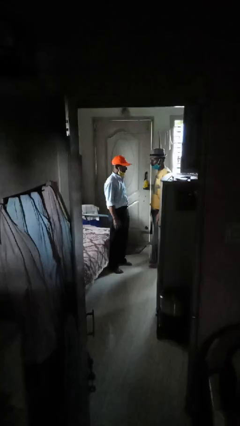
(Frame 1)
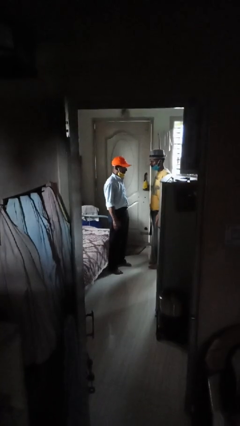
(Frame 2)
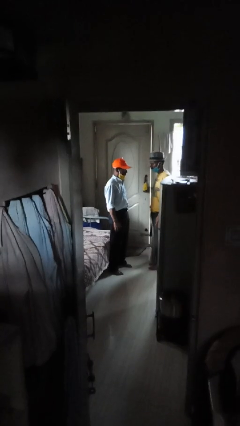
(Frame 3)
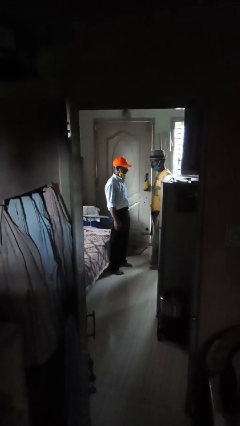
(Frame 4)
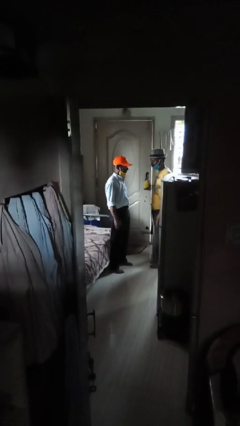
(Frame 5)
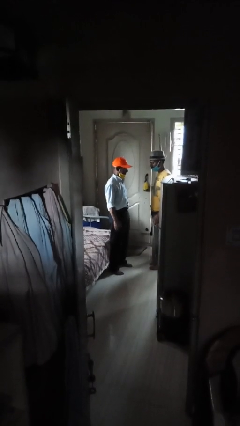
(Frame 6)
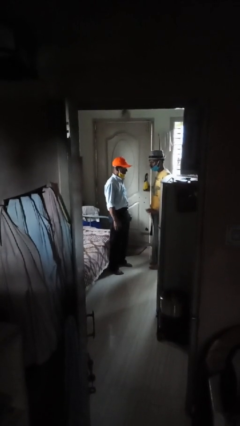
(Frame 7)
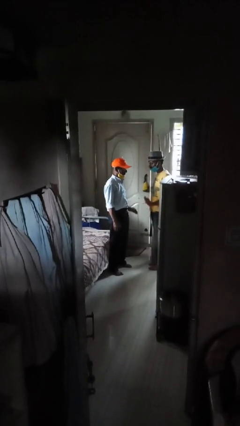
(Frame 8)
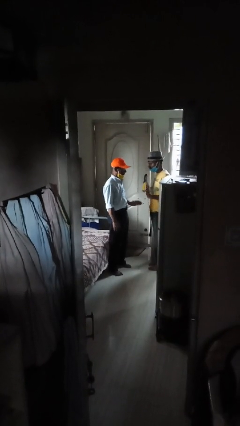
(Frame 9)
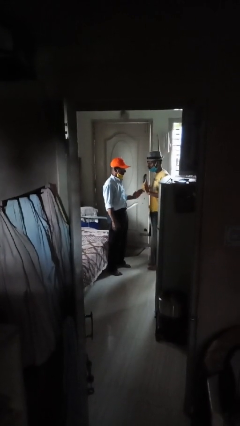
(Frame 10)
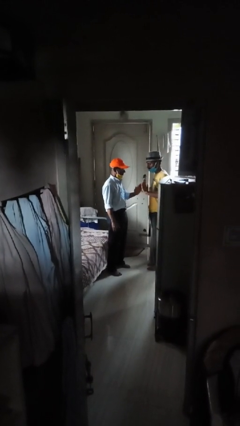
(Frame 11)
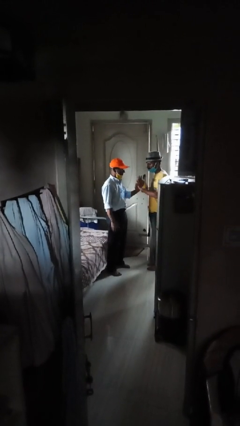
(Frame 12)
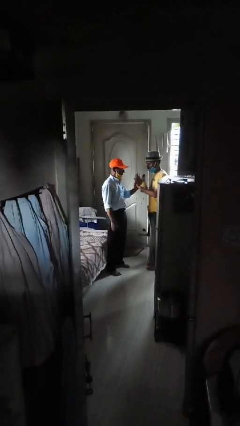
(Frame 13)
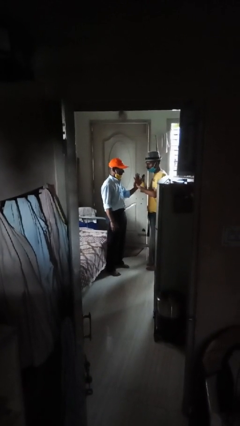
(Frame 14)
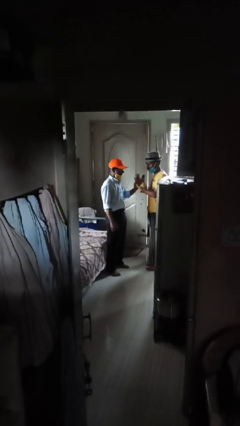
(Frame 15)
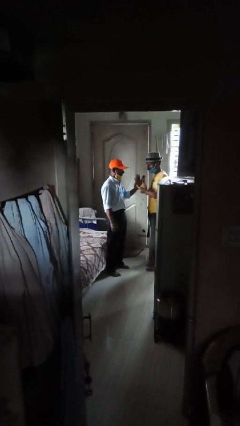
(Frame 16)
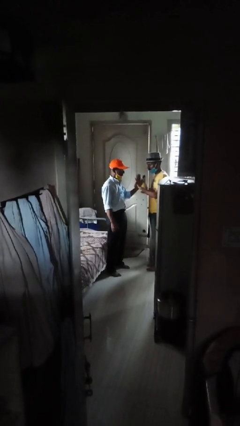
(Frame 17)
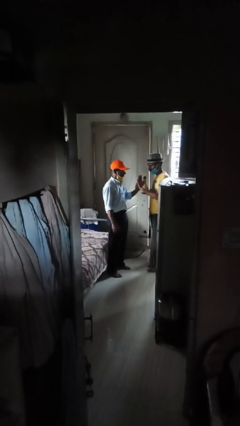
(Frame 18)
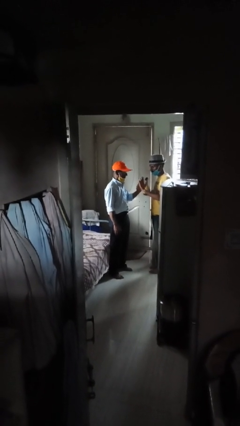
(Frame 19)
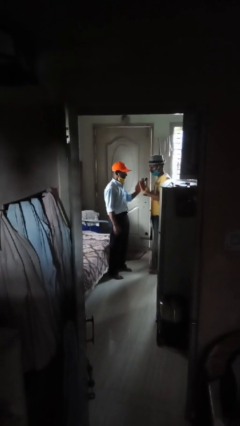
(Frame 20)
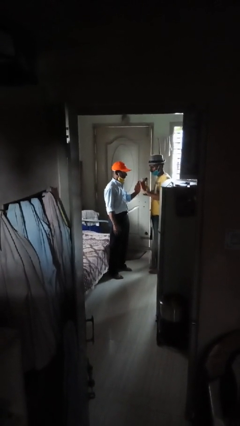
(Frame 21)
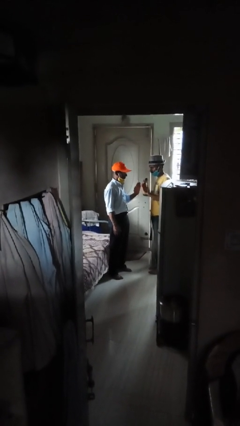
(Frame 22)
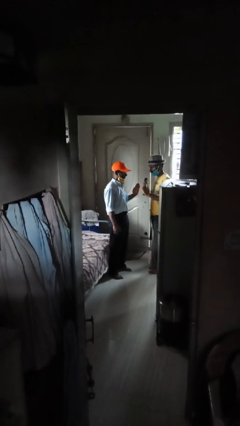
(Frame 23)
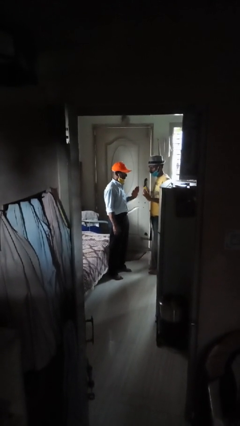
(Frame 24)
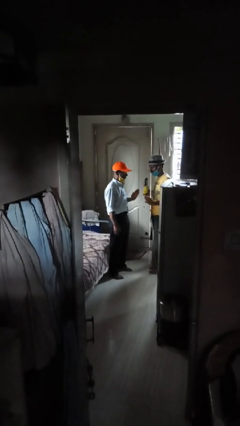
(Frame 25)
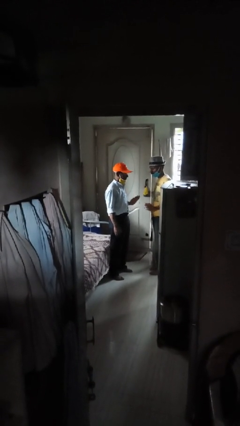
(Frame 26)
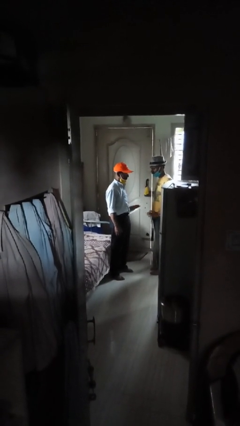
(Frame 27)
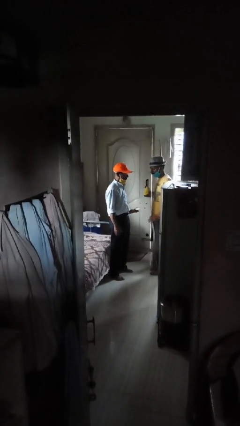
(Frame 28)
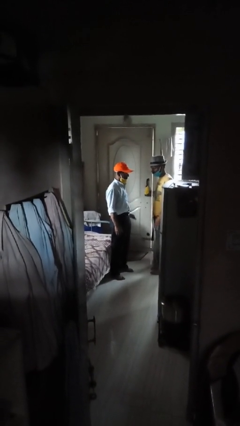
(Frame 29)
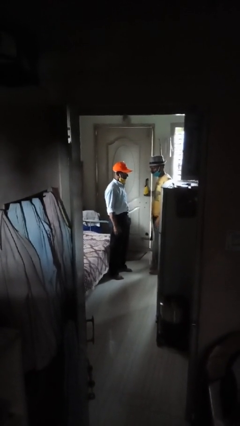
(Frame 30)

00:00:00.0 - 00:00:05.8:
person highfives hand

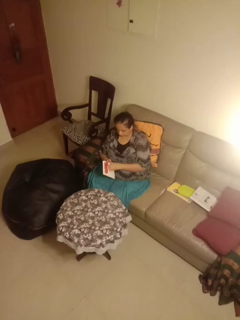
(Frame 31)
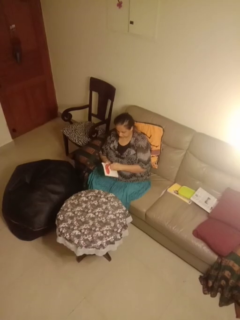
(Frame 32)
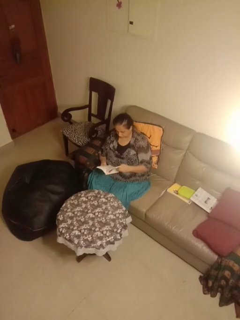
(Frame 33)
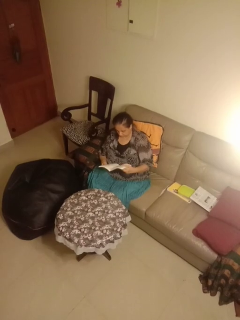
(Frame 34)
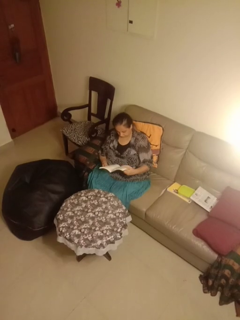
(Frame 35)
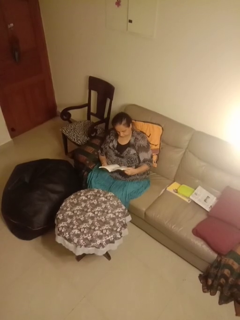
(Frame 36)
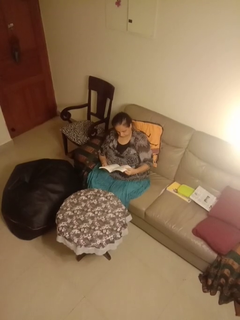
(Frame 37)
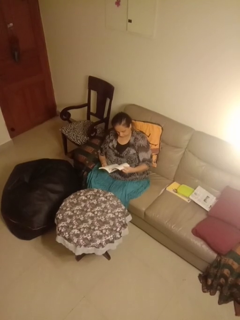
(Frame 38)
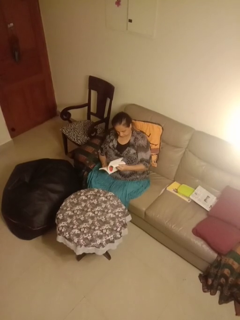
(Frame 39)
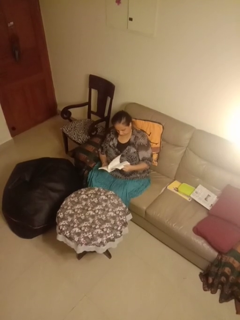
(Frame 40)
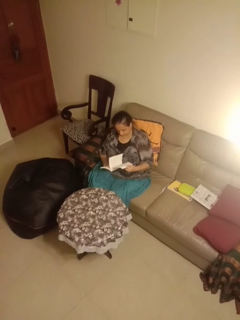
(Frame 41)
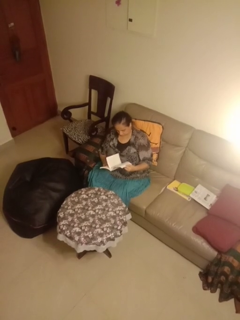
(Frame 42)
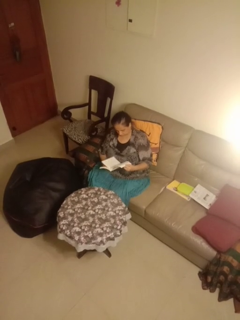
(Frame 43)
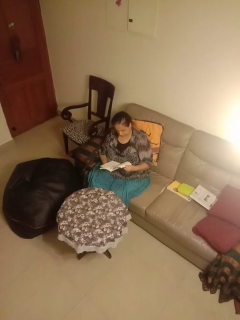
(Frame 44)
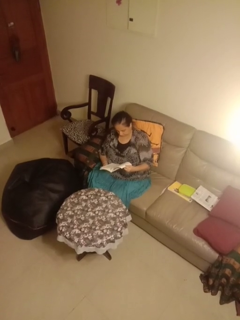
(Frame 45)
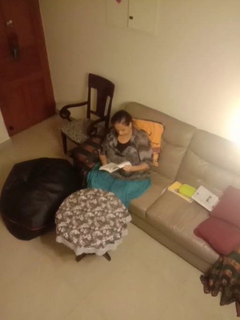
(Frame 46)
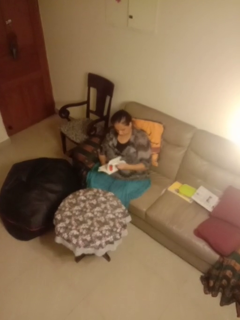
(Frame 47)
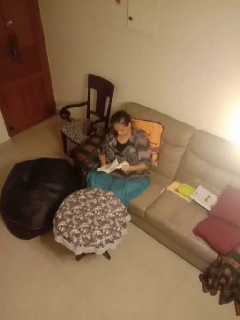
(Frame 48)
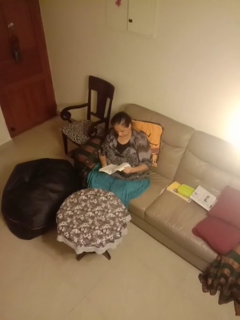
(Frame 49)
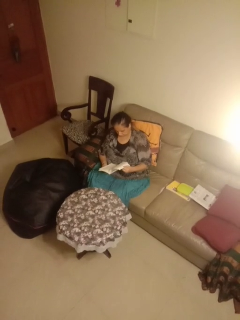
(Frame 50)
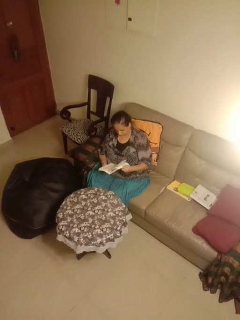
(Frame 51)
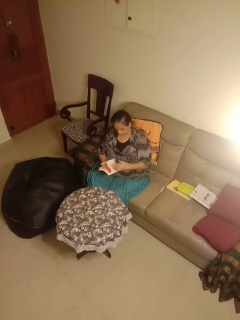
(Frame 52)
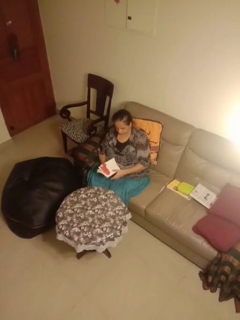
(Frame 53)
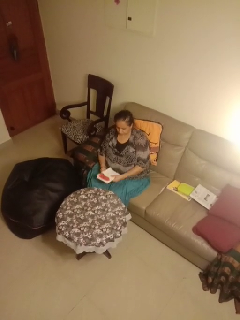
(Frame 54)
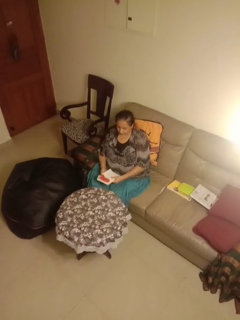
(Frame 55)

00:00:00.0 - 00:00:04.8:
person reads book

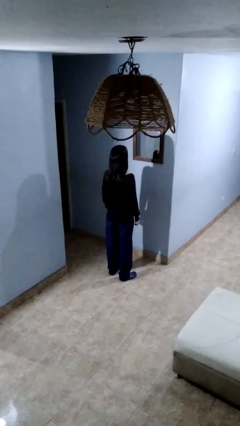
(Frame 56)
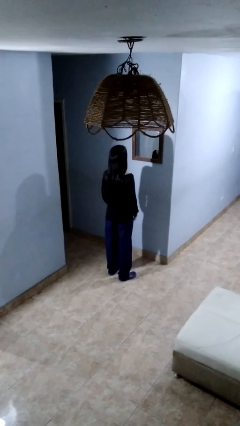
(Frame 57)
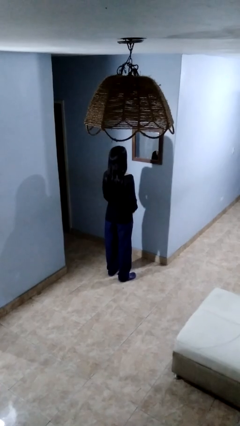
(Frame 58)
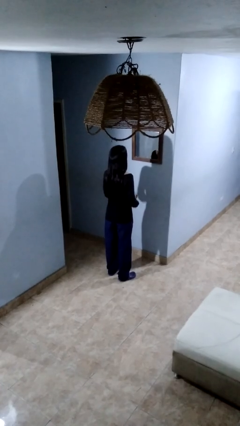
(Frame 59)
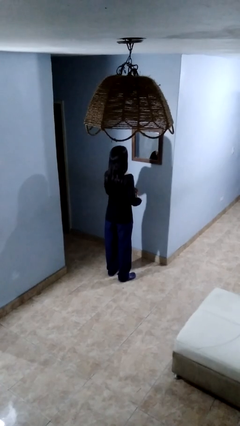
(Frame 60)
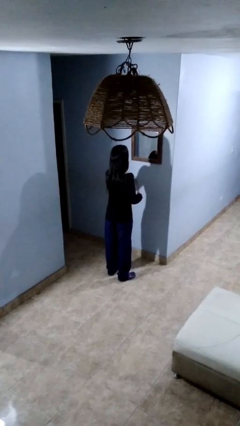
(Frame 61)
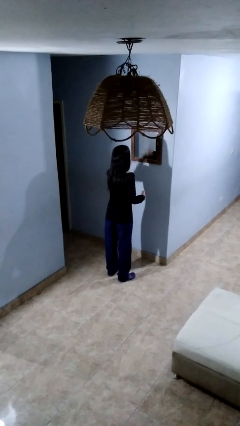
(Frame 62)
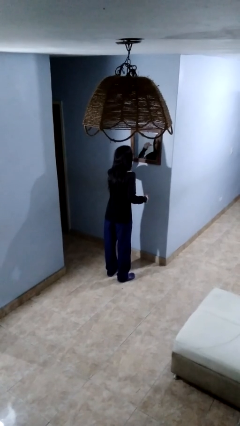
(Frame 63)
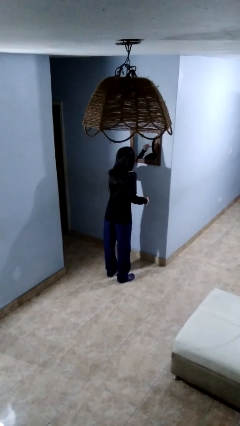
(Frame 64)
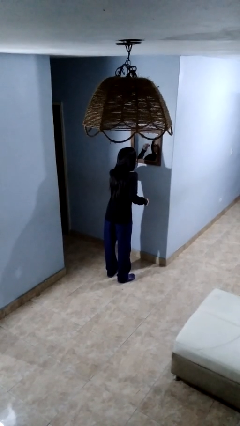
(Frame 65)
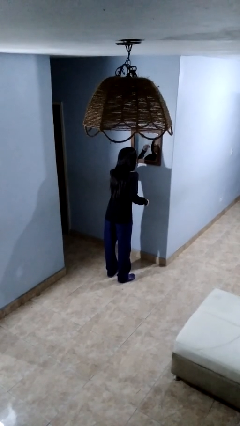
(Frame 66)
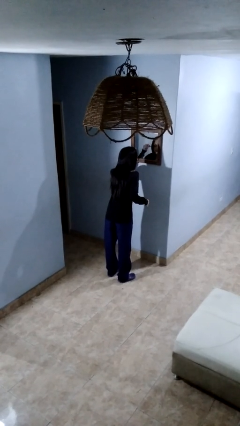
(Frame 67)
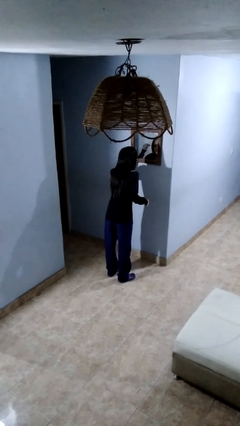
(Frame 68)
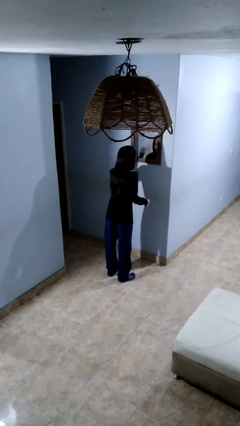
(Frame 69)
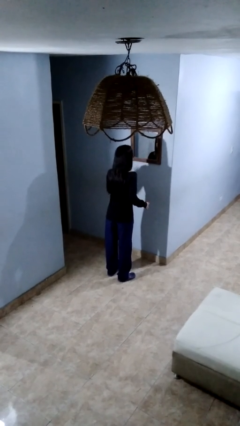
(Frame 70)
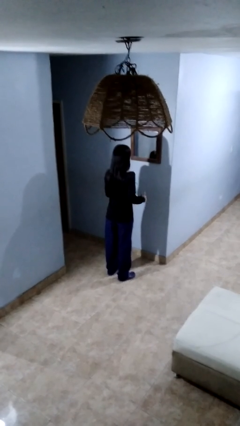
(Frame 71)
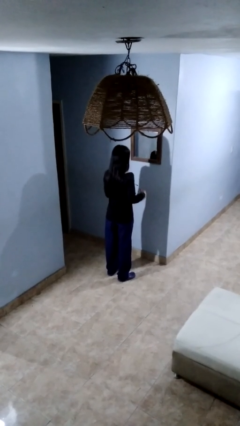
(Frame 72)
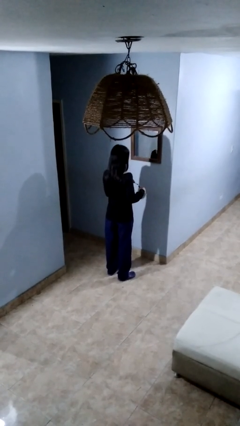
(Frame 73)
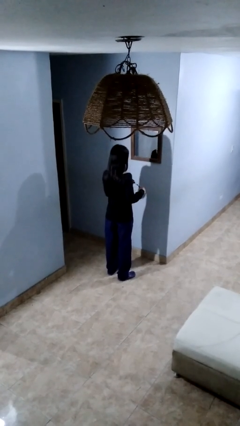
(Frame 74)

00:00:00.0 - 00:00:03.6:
person applies eye makeup

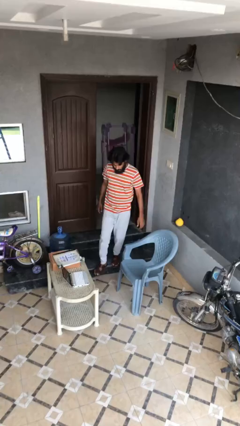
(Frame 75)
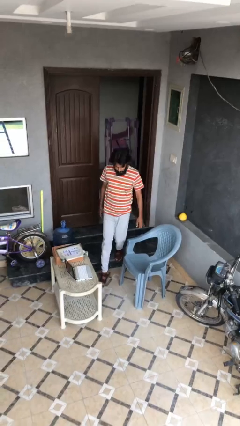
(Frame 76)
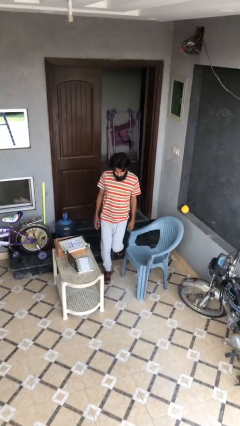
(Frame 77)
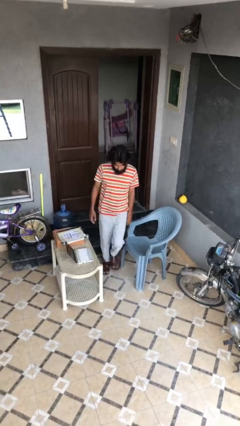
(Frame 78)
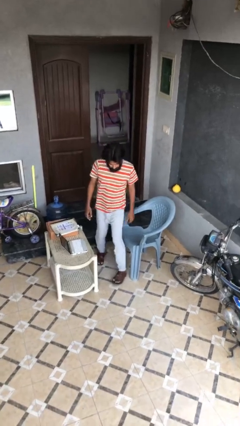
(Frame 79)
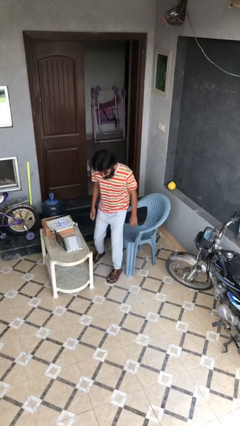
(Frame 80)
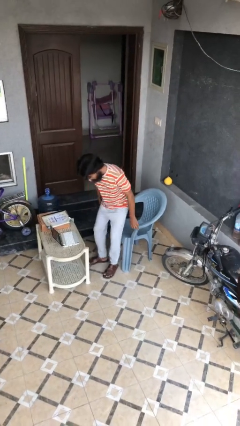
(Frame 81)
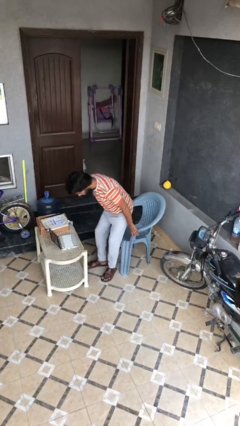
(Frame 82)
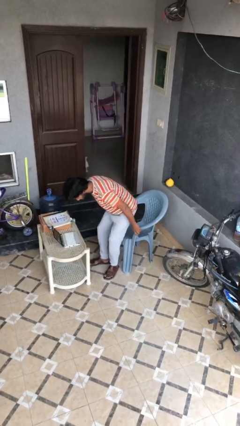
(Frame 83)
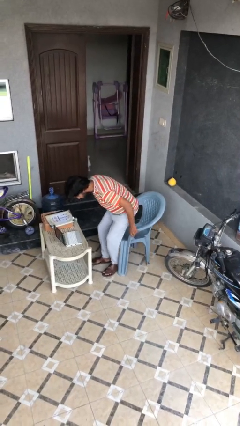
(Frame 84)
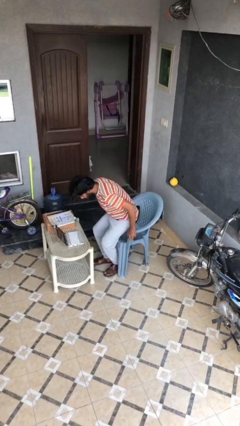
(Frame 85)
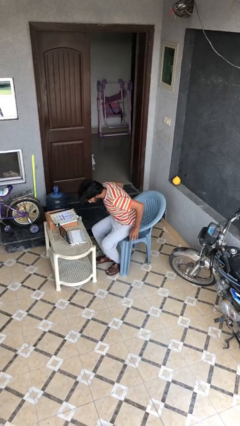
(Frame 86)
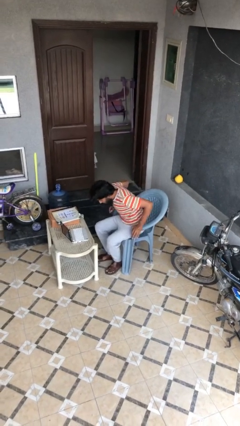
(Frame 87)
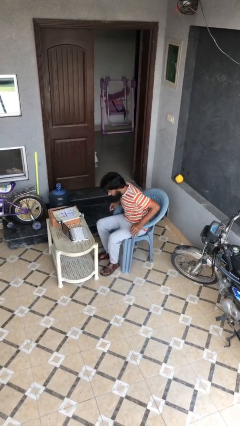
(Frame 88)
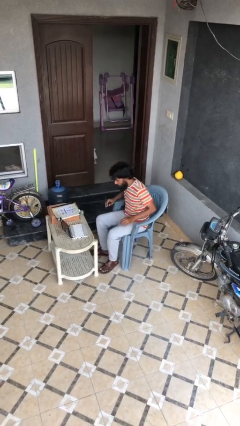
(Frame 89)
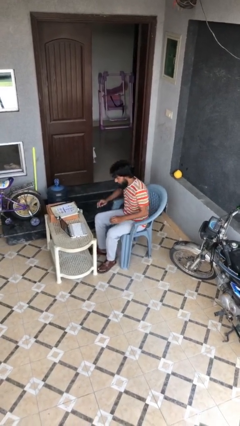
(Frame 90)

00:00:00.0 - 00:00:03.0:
person sits down

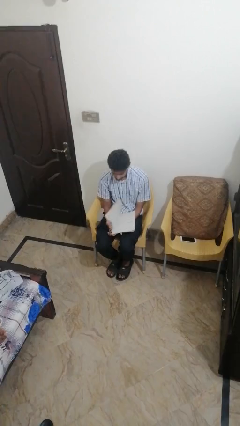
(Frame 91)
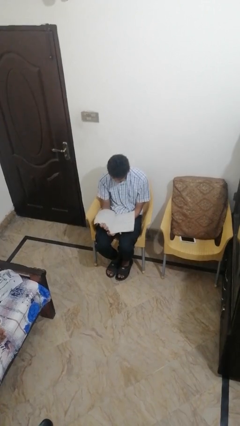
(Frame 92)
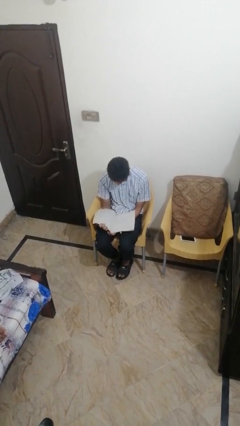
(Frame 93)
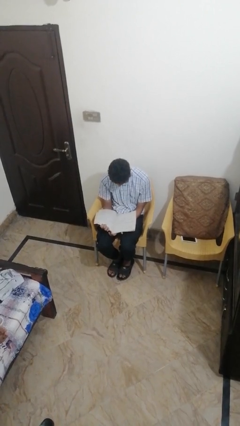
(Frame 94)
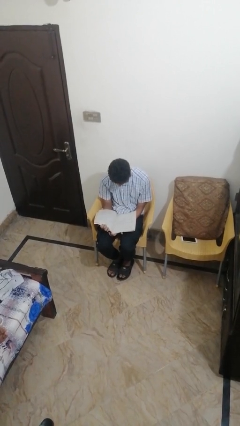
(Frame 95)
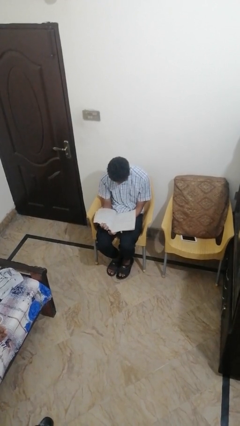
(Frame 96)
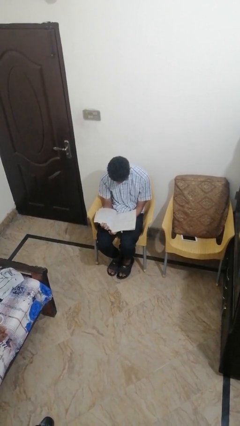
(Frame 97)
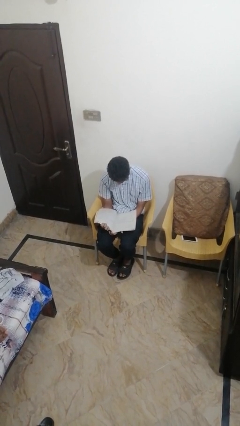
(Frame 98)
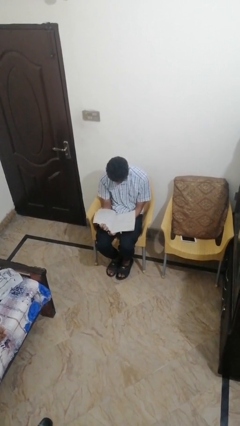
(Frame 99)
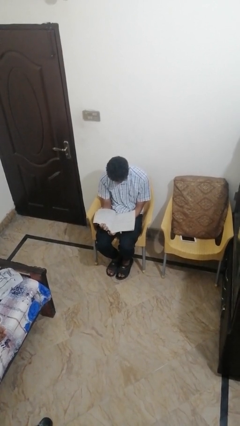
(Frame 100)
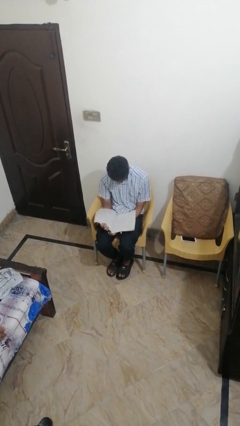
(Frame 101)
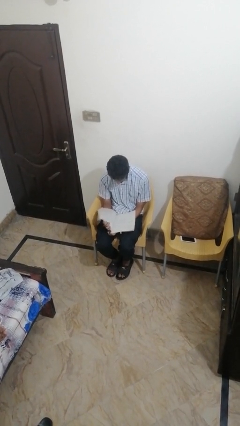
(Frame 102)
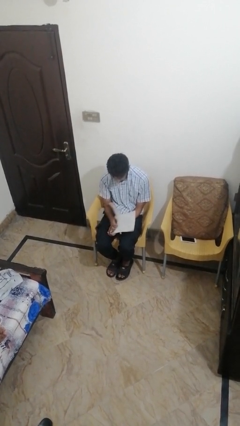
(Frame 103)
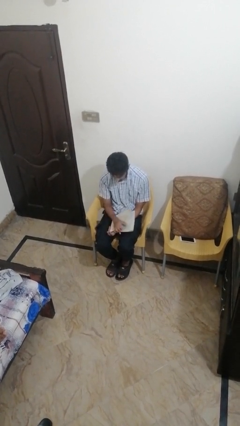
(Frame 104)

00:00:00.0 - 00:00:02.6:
person reads magazine
